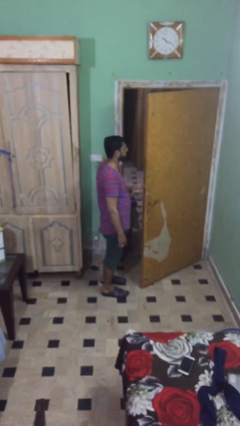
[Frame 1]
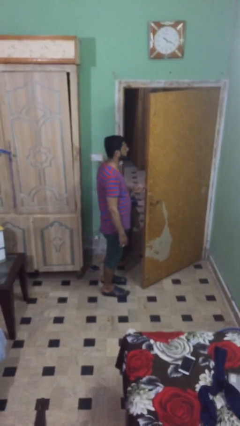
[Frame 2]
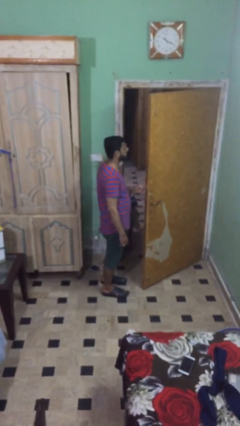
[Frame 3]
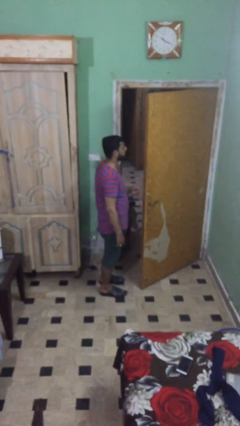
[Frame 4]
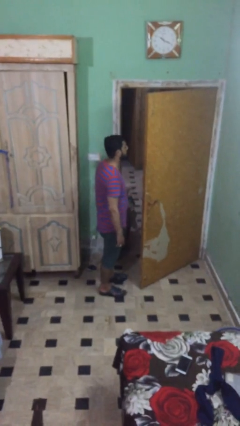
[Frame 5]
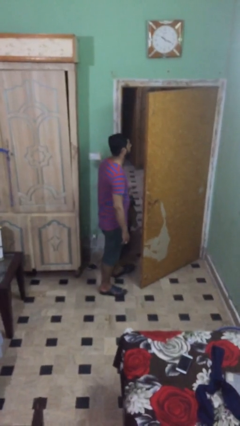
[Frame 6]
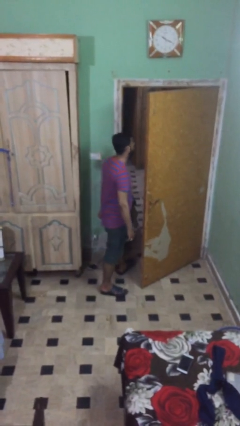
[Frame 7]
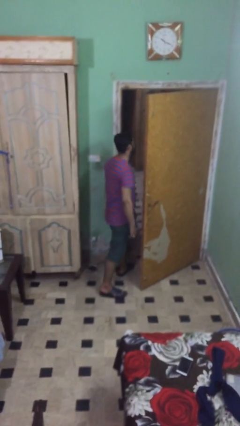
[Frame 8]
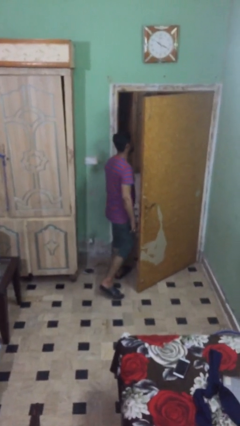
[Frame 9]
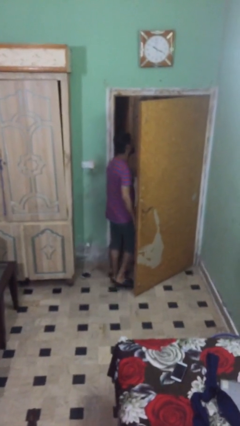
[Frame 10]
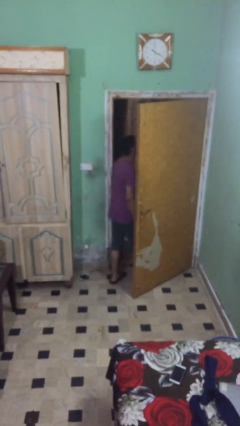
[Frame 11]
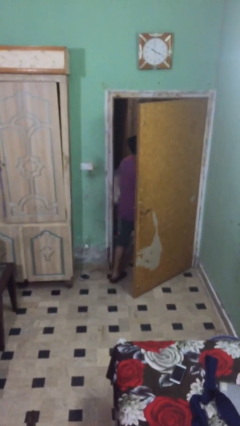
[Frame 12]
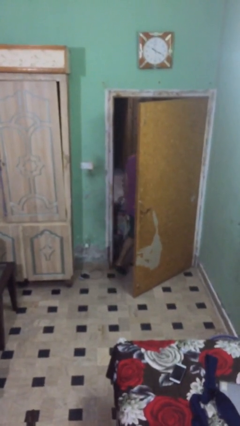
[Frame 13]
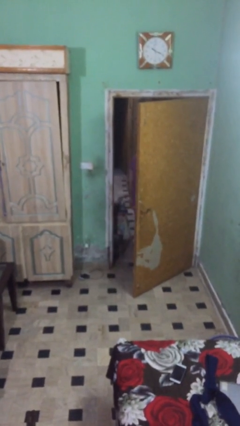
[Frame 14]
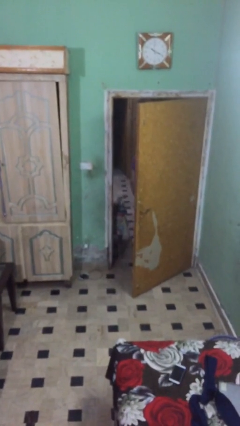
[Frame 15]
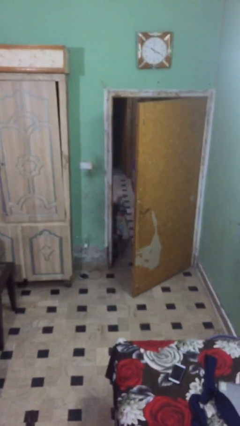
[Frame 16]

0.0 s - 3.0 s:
person exits scene through structure

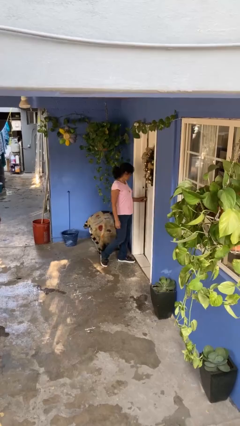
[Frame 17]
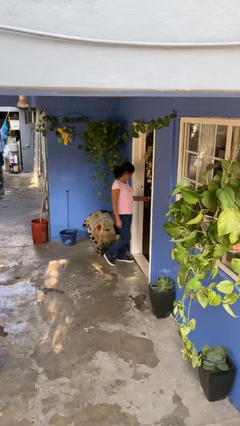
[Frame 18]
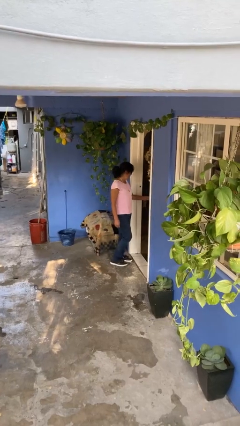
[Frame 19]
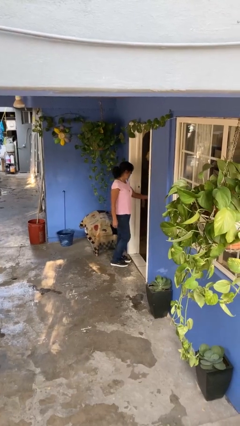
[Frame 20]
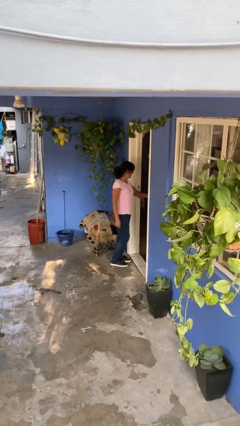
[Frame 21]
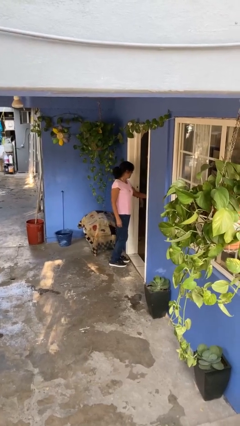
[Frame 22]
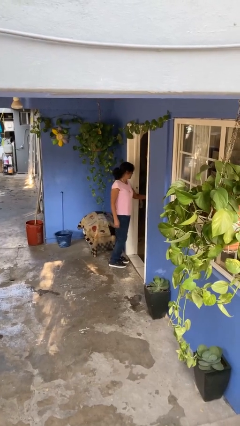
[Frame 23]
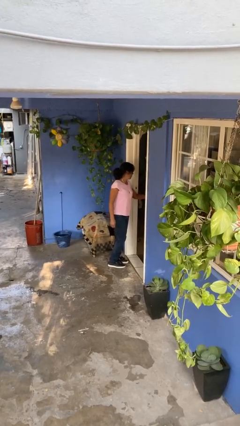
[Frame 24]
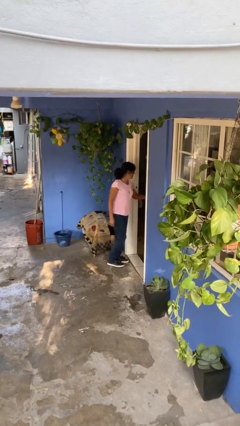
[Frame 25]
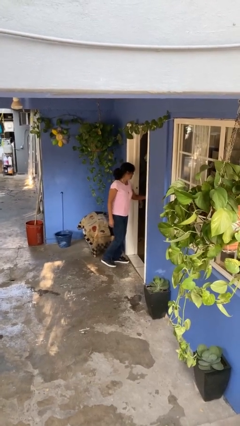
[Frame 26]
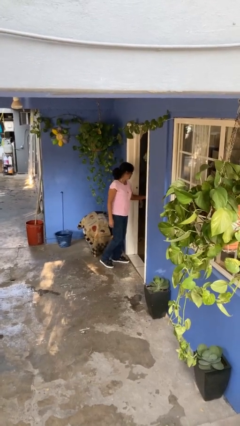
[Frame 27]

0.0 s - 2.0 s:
person opens facility door

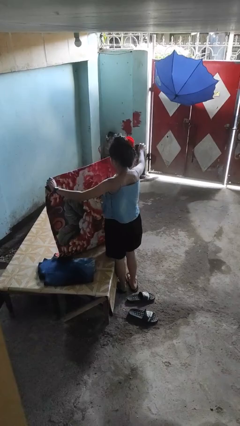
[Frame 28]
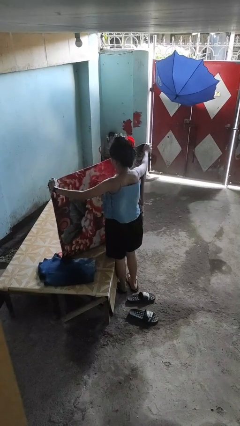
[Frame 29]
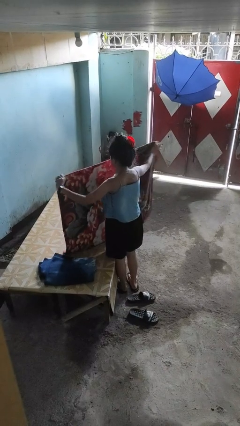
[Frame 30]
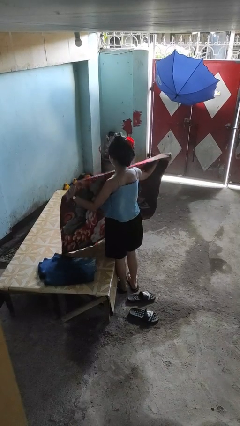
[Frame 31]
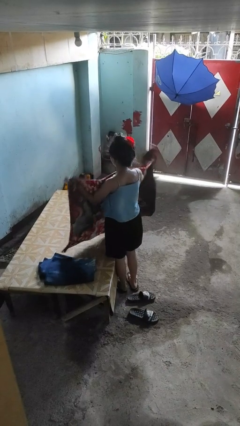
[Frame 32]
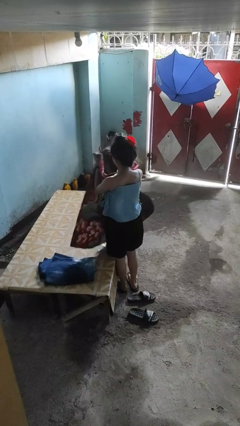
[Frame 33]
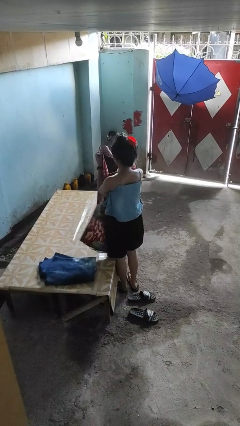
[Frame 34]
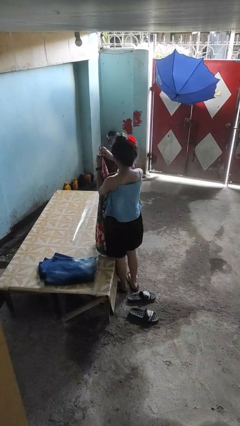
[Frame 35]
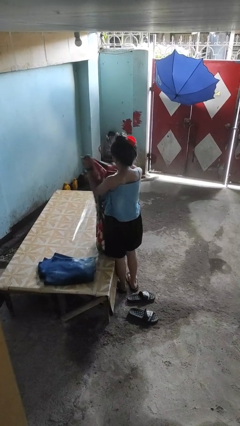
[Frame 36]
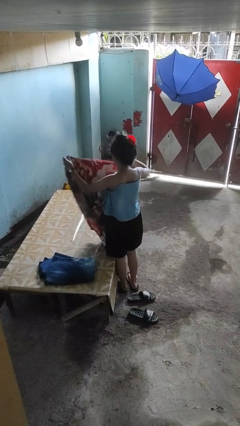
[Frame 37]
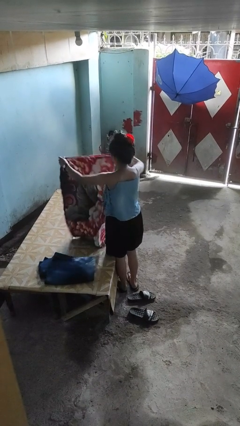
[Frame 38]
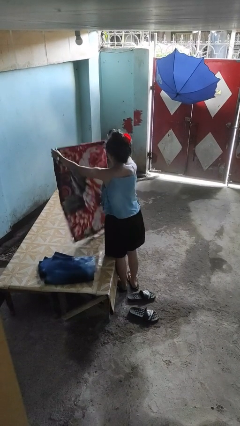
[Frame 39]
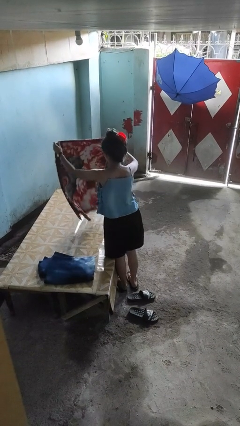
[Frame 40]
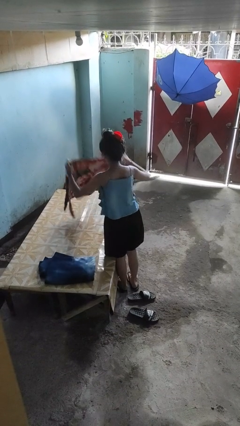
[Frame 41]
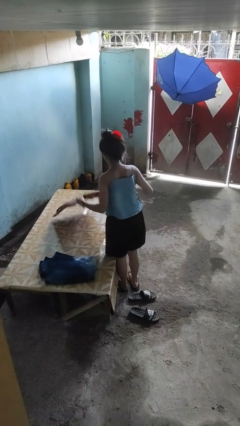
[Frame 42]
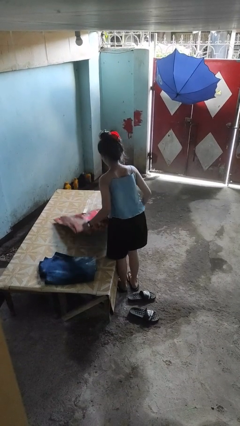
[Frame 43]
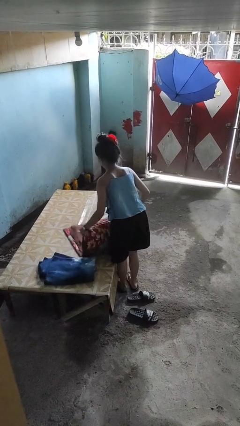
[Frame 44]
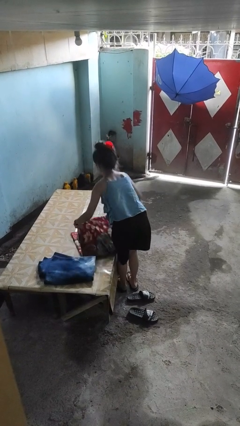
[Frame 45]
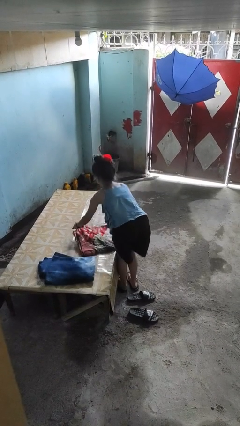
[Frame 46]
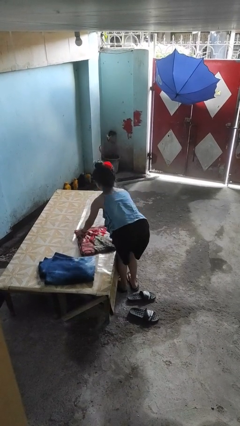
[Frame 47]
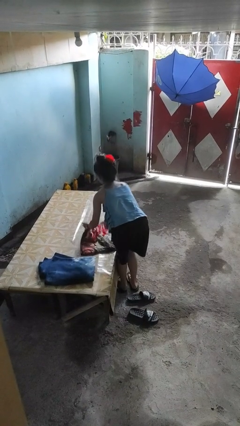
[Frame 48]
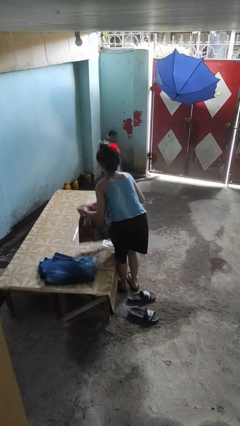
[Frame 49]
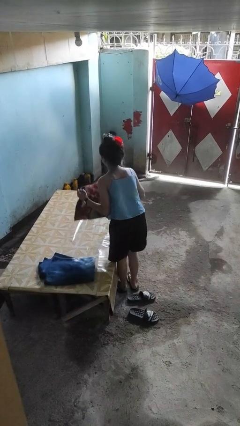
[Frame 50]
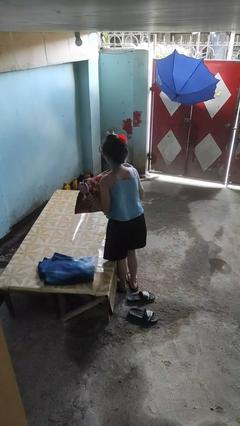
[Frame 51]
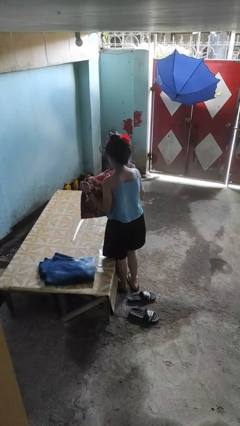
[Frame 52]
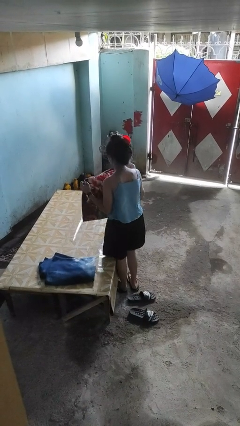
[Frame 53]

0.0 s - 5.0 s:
person folds blanket

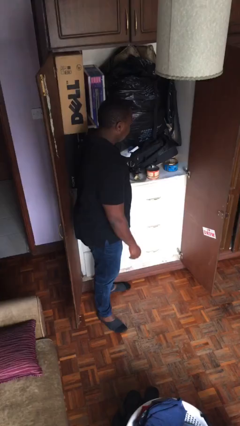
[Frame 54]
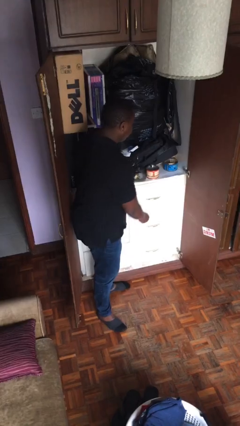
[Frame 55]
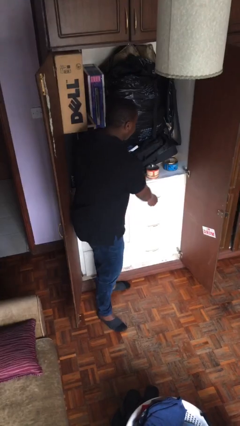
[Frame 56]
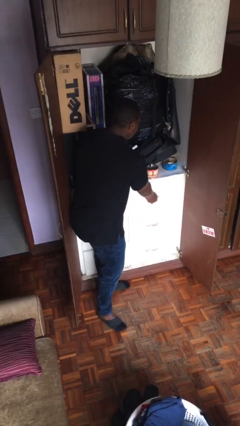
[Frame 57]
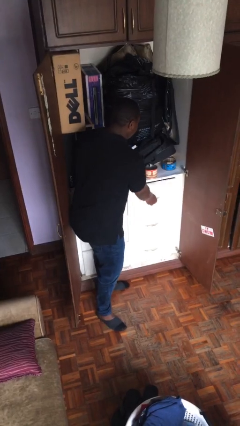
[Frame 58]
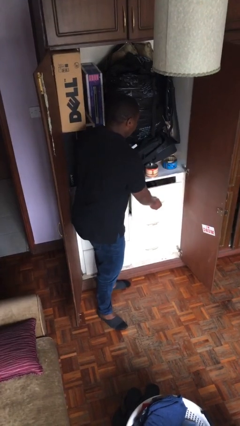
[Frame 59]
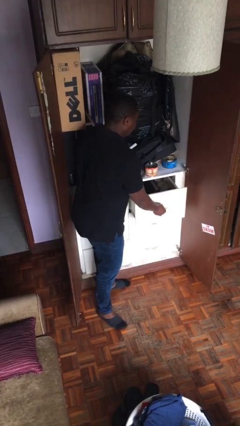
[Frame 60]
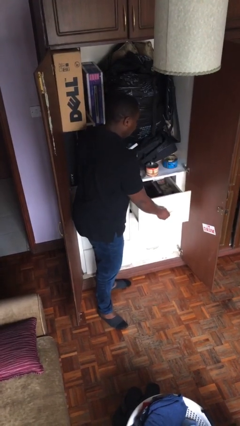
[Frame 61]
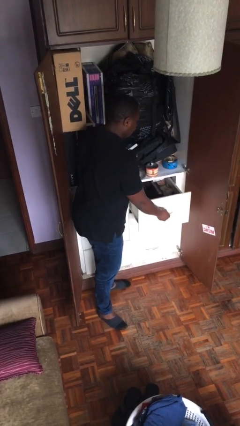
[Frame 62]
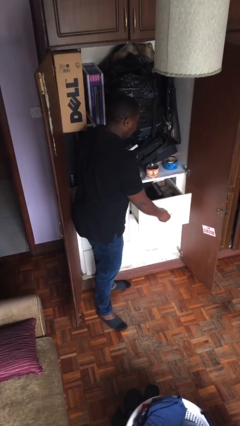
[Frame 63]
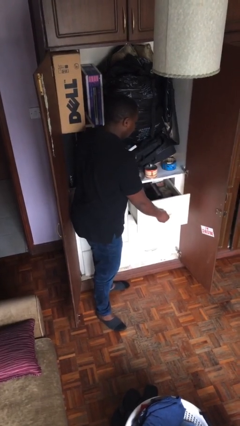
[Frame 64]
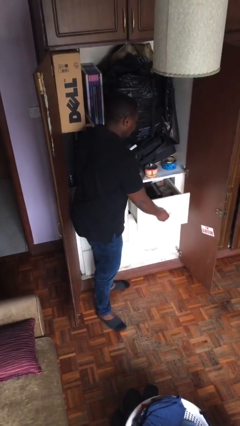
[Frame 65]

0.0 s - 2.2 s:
person opens dresser drawer

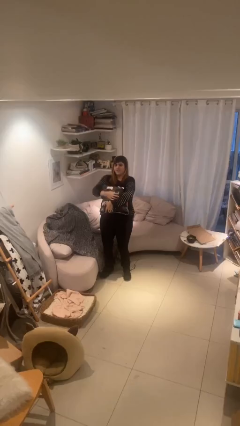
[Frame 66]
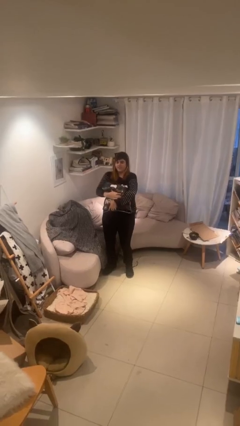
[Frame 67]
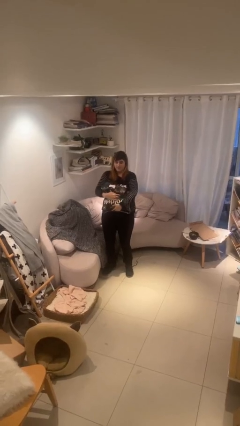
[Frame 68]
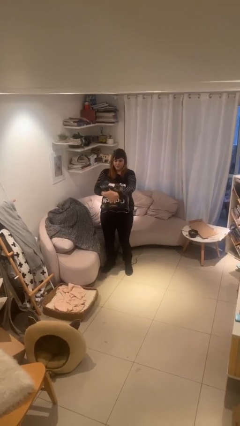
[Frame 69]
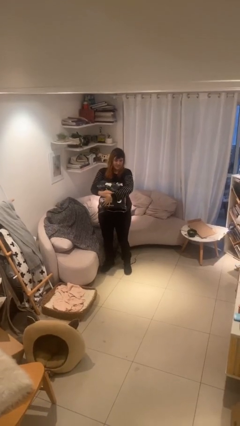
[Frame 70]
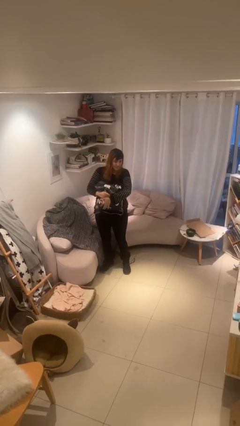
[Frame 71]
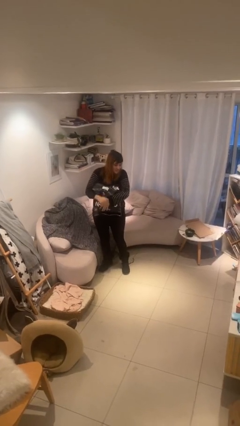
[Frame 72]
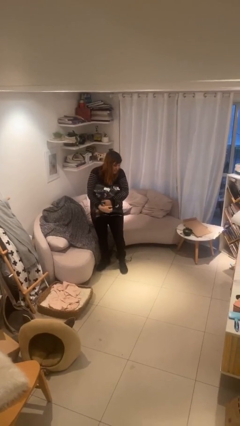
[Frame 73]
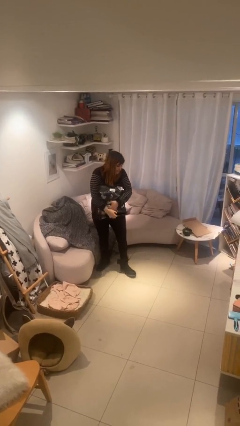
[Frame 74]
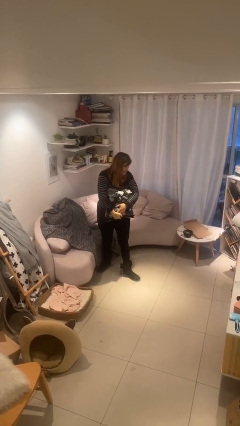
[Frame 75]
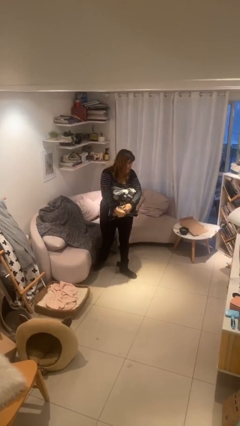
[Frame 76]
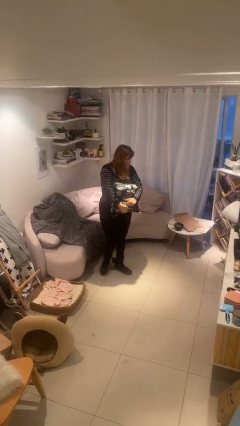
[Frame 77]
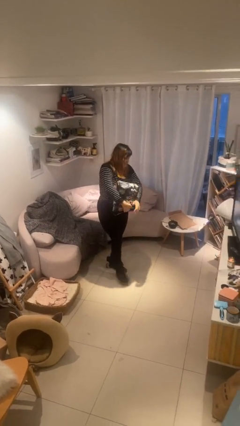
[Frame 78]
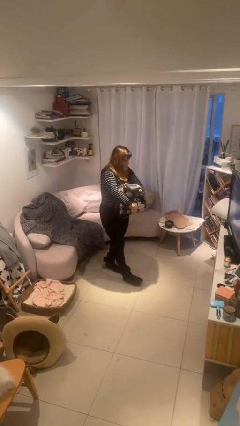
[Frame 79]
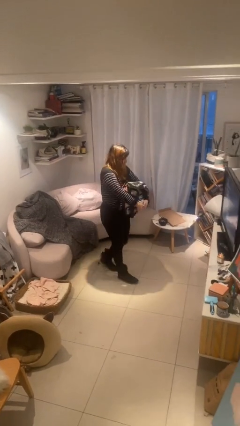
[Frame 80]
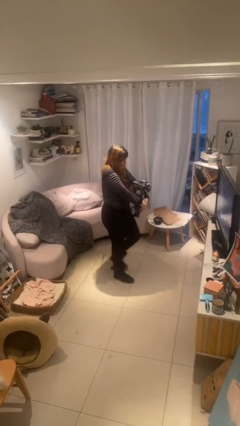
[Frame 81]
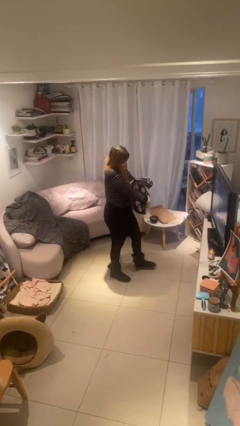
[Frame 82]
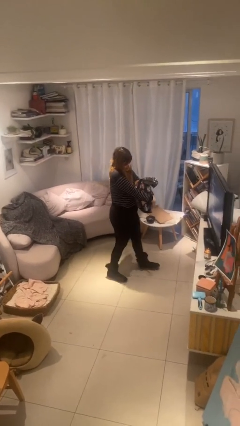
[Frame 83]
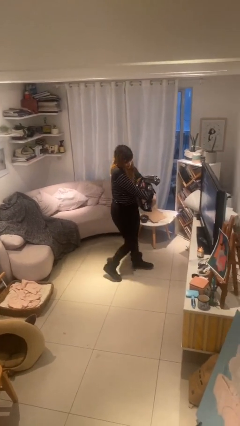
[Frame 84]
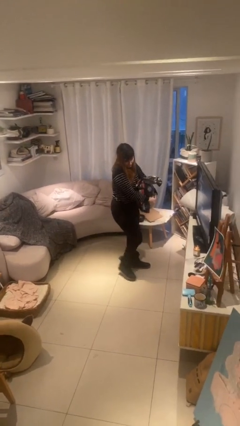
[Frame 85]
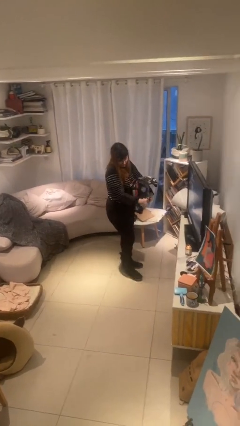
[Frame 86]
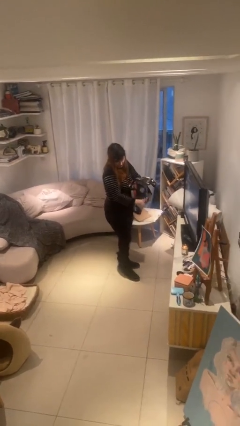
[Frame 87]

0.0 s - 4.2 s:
person carries heavy object

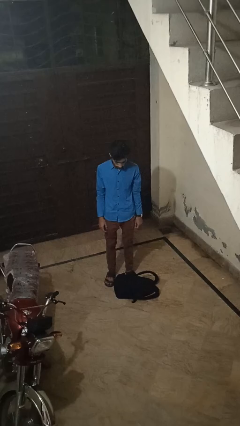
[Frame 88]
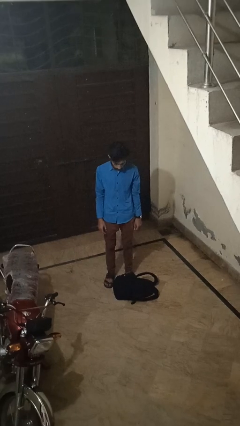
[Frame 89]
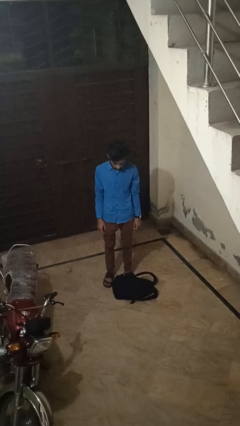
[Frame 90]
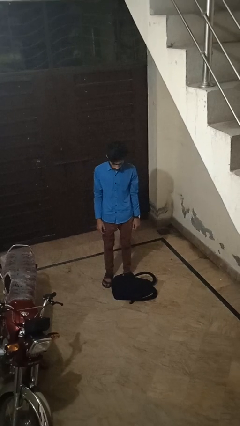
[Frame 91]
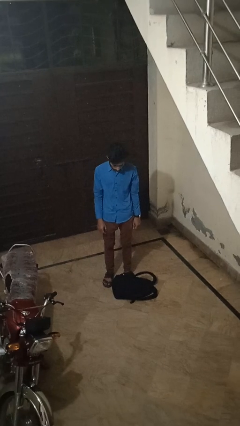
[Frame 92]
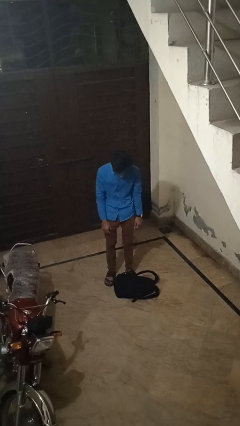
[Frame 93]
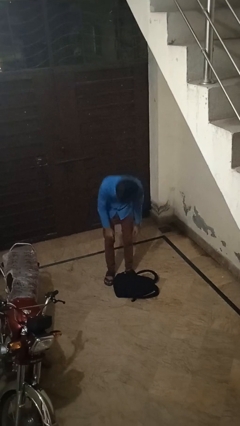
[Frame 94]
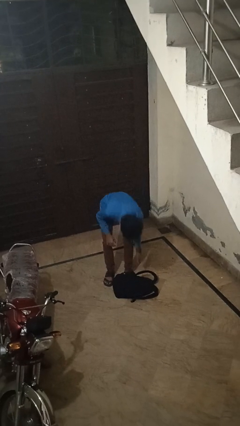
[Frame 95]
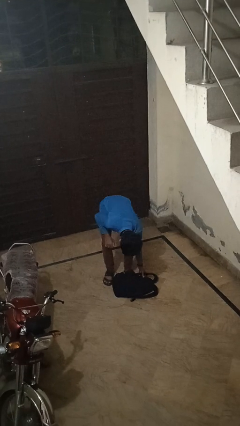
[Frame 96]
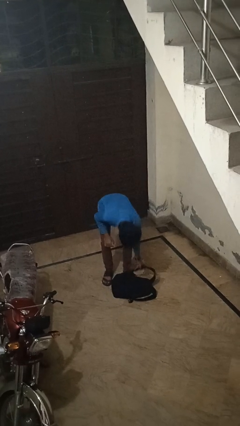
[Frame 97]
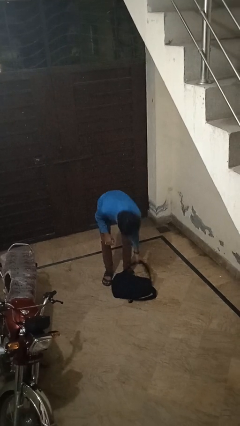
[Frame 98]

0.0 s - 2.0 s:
person picks up object from floor
